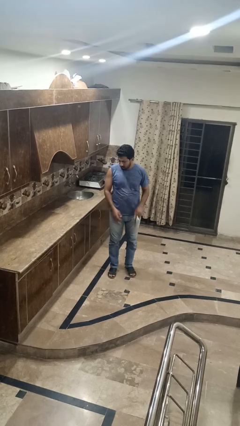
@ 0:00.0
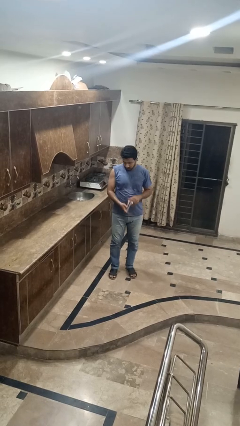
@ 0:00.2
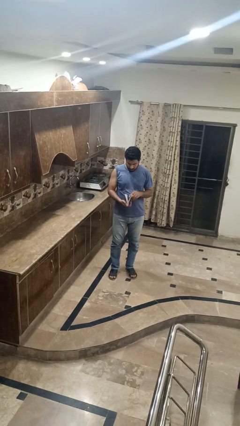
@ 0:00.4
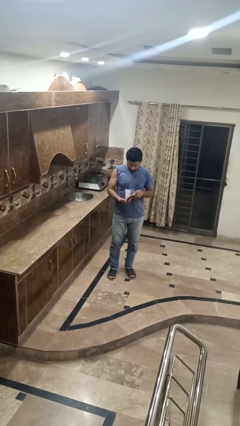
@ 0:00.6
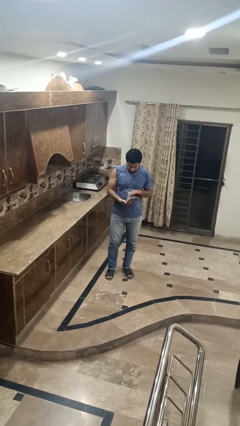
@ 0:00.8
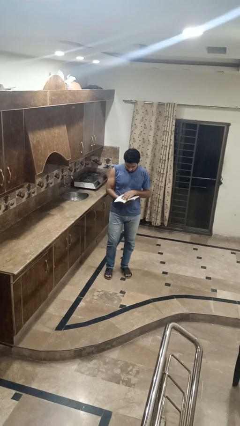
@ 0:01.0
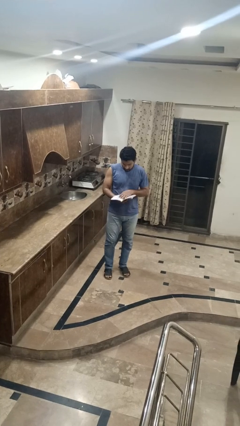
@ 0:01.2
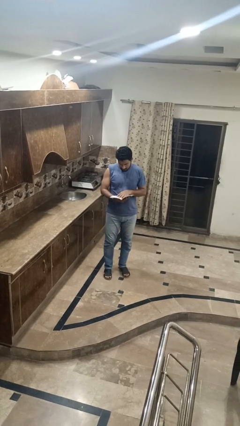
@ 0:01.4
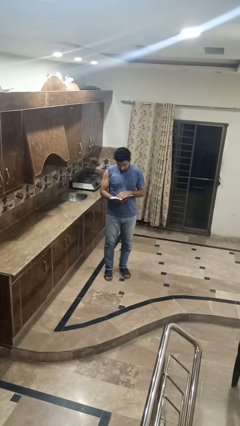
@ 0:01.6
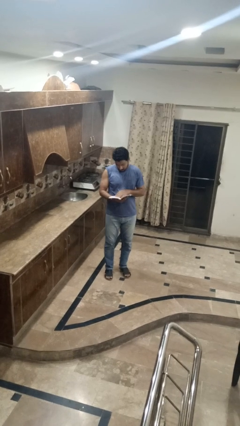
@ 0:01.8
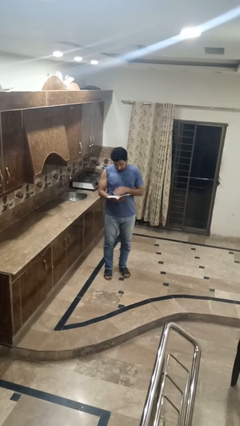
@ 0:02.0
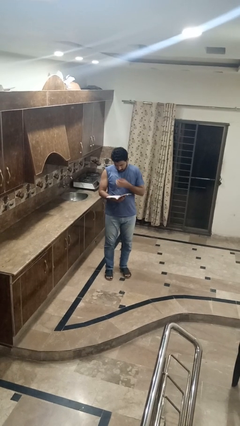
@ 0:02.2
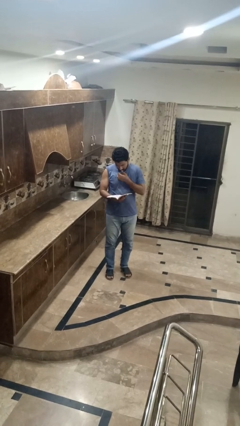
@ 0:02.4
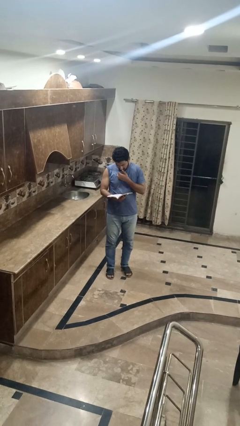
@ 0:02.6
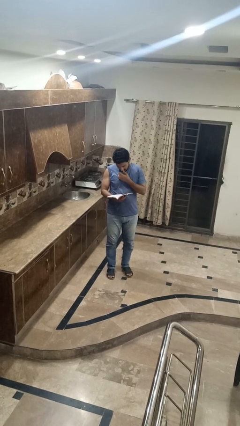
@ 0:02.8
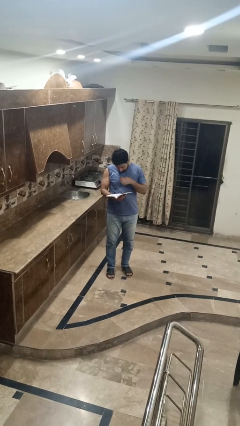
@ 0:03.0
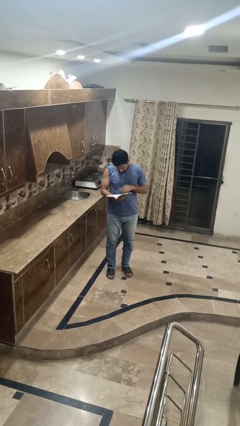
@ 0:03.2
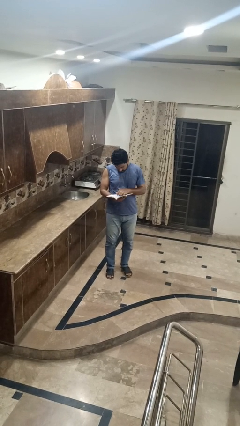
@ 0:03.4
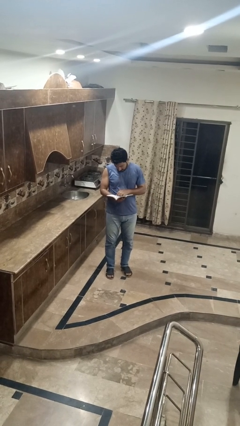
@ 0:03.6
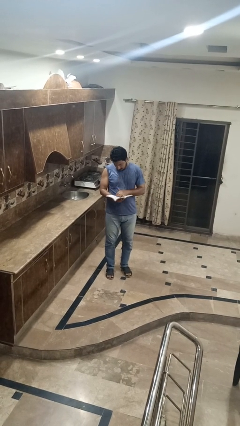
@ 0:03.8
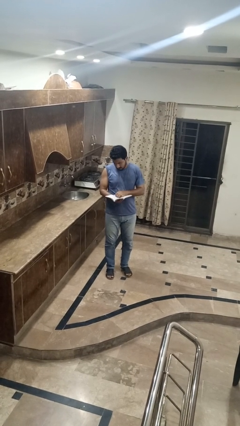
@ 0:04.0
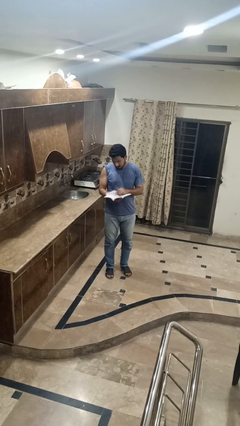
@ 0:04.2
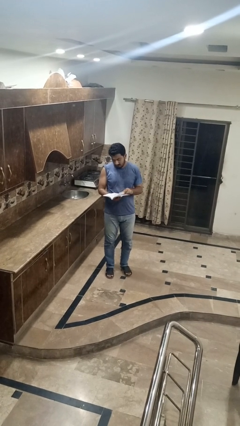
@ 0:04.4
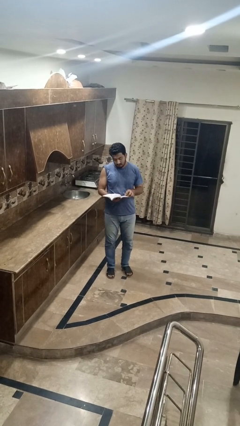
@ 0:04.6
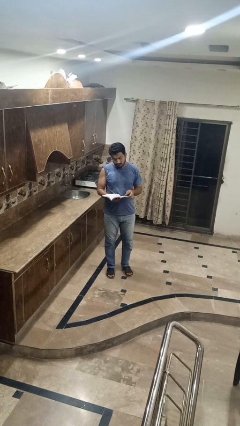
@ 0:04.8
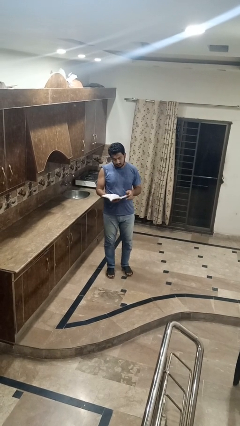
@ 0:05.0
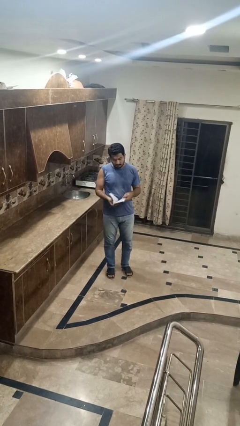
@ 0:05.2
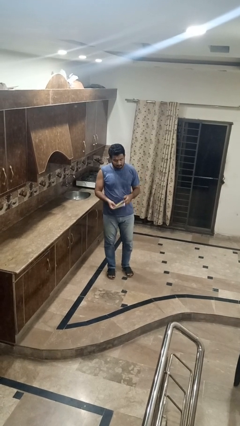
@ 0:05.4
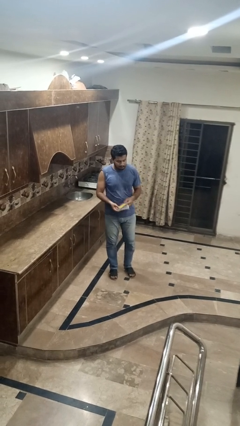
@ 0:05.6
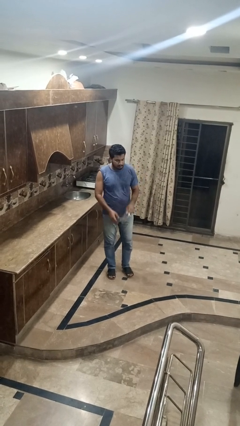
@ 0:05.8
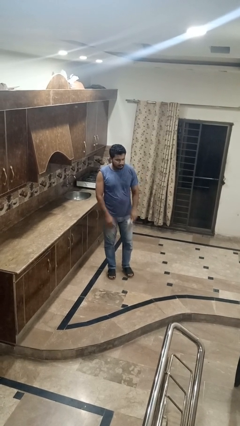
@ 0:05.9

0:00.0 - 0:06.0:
person reads book

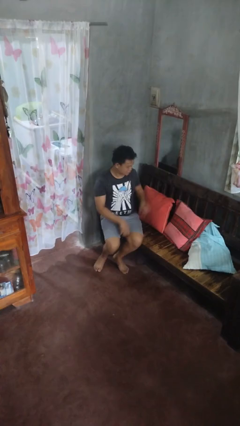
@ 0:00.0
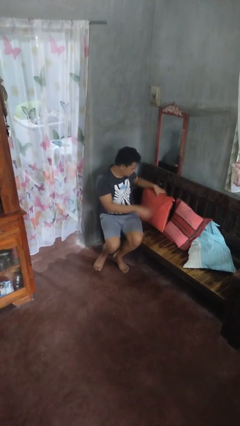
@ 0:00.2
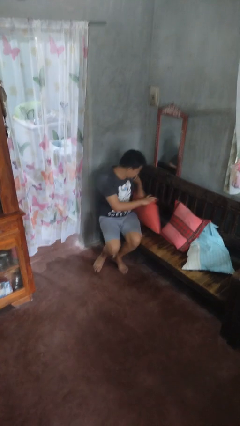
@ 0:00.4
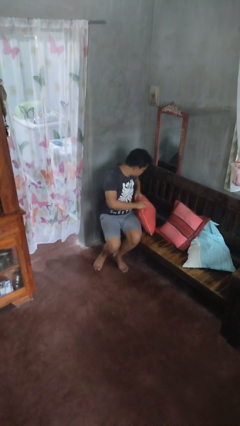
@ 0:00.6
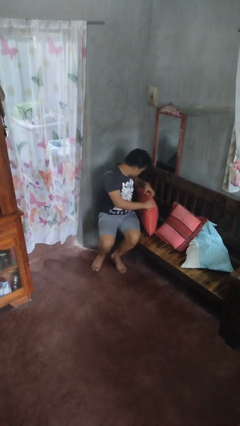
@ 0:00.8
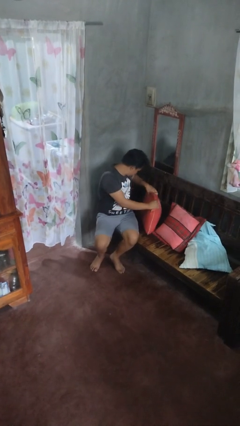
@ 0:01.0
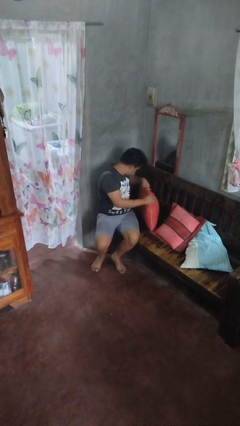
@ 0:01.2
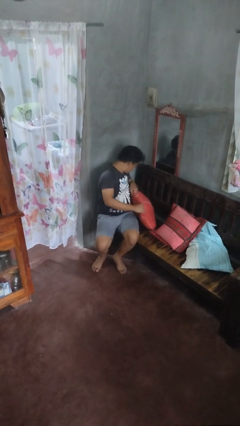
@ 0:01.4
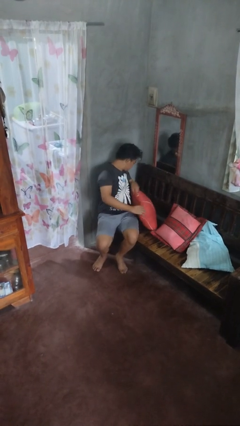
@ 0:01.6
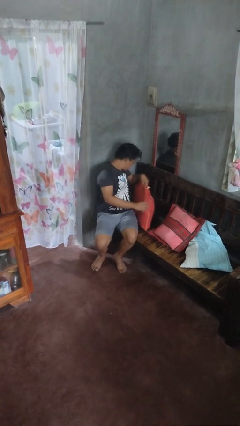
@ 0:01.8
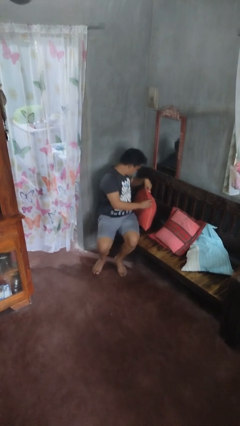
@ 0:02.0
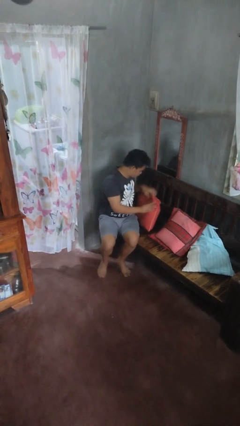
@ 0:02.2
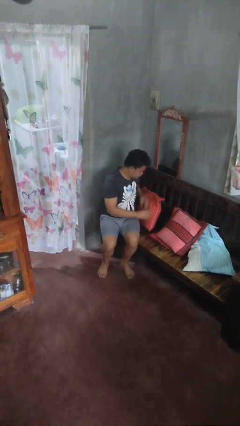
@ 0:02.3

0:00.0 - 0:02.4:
person searches in couch

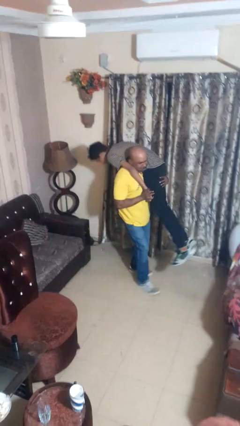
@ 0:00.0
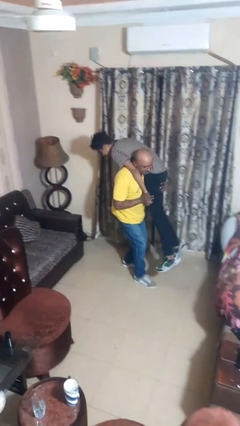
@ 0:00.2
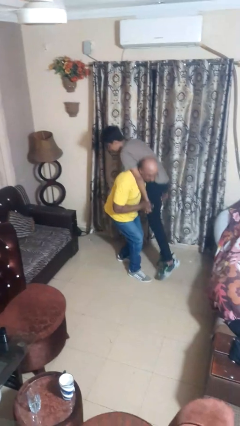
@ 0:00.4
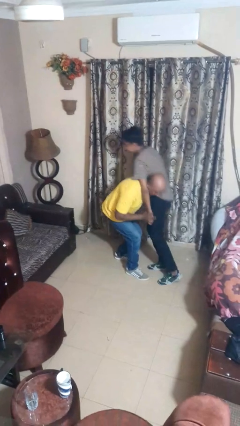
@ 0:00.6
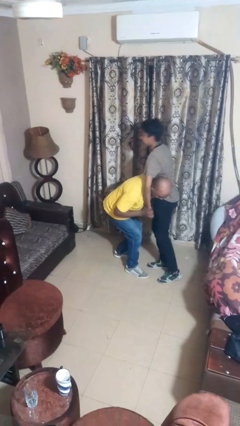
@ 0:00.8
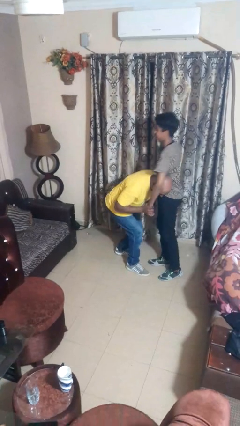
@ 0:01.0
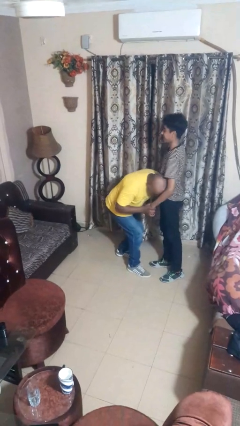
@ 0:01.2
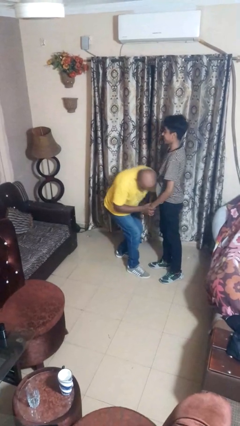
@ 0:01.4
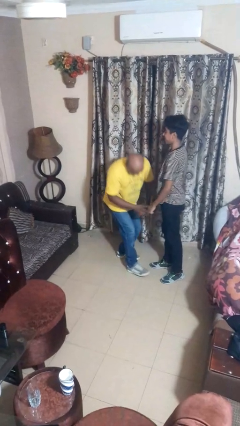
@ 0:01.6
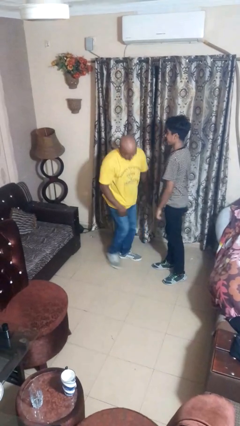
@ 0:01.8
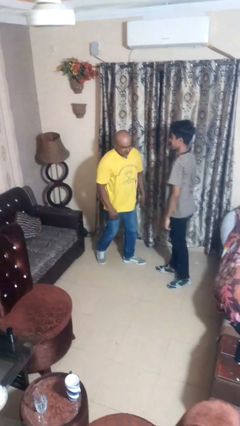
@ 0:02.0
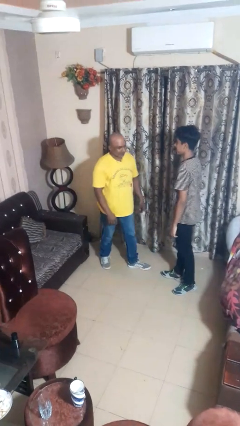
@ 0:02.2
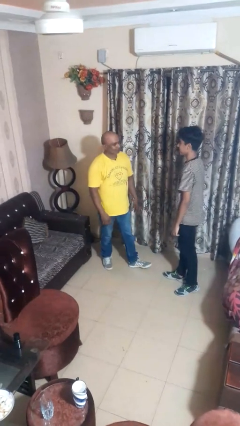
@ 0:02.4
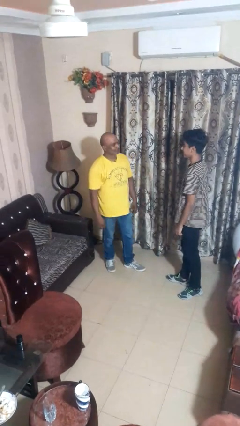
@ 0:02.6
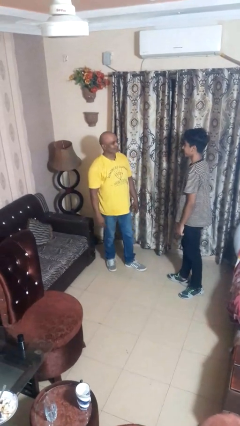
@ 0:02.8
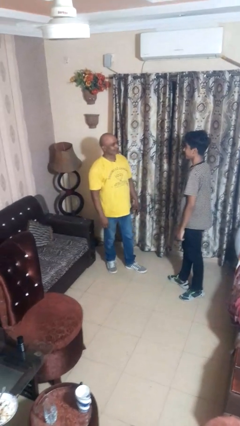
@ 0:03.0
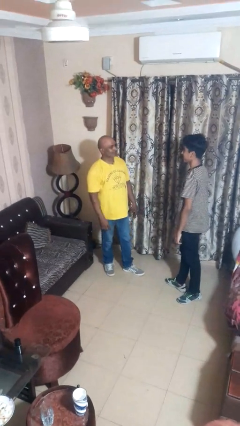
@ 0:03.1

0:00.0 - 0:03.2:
person puts down person

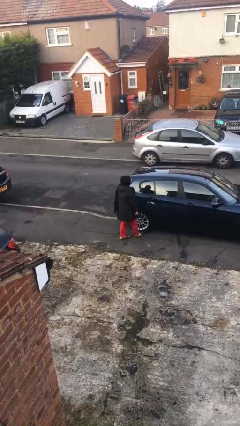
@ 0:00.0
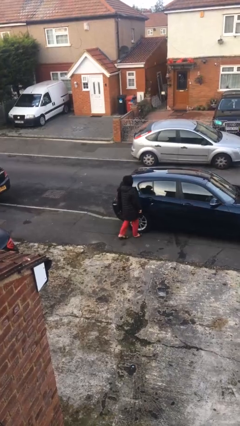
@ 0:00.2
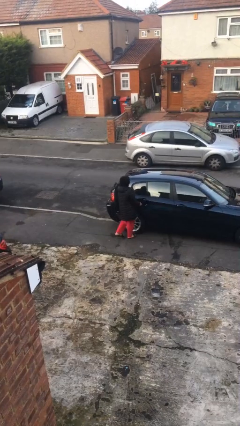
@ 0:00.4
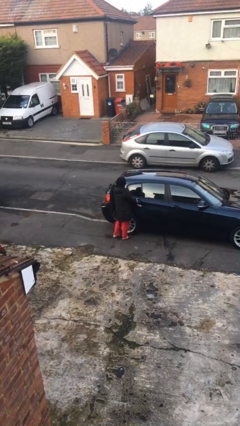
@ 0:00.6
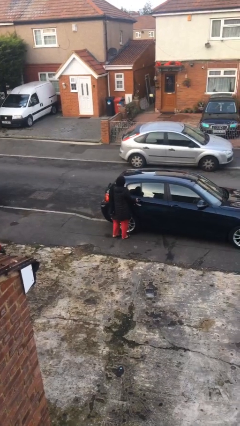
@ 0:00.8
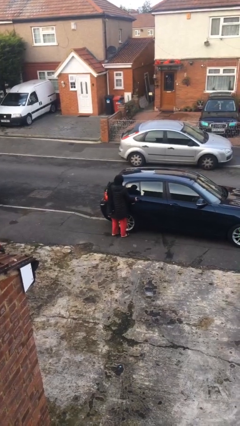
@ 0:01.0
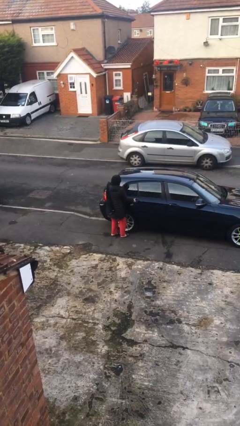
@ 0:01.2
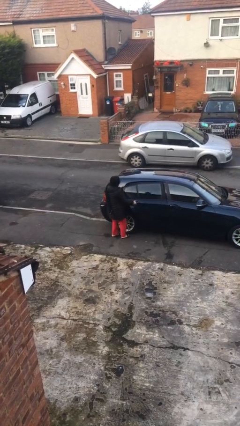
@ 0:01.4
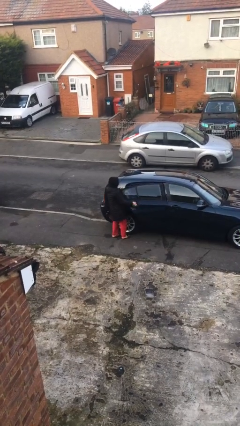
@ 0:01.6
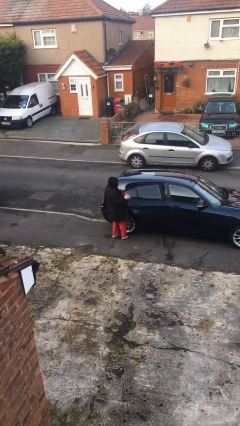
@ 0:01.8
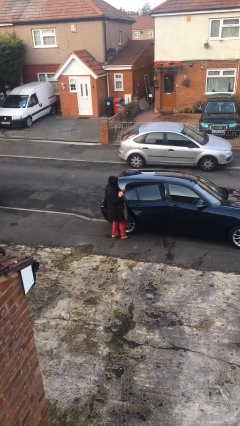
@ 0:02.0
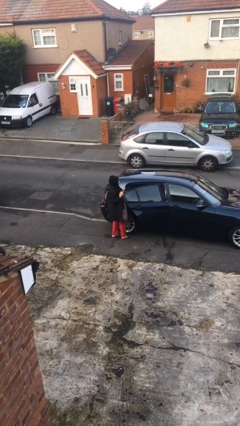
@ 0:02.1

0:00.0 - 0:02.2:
person opens car door

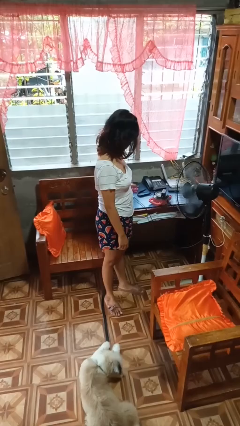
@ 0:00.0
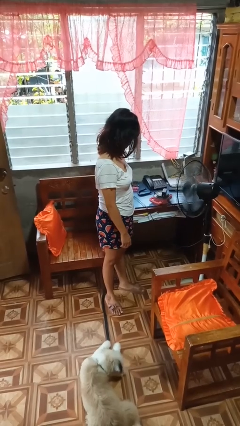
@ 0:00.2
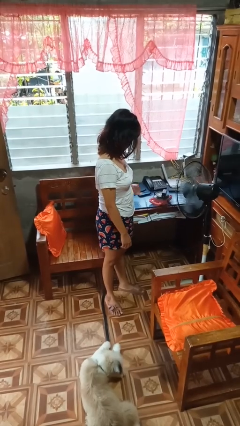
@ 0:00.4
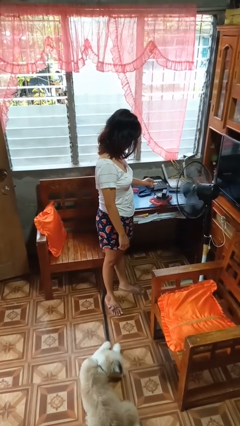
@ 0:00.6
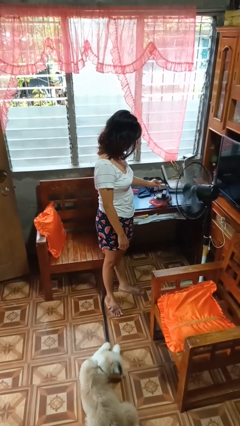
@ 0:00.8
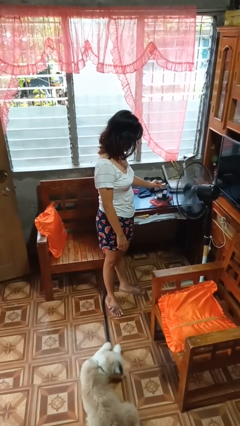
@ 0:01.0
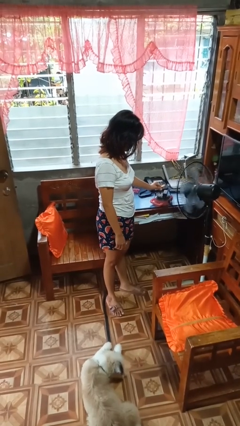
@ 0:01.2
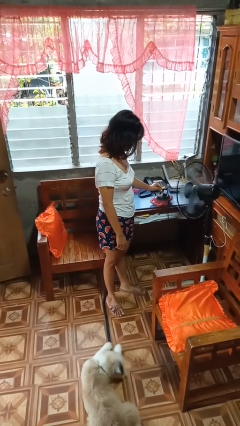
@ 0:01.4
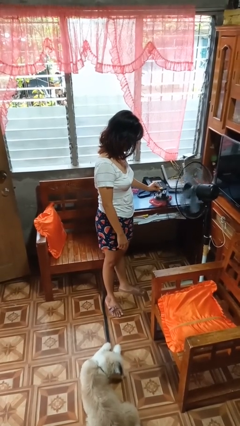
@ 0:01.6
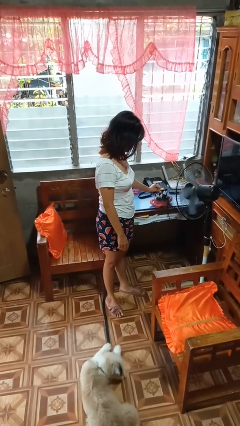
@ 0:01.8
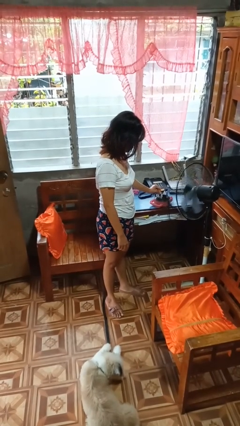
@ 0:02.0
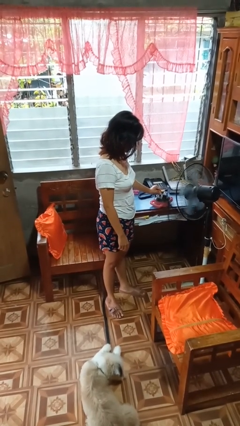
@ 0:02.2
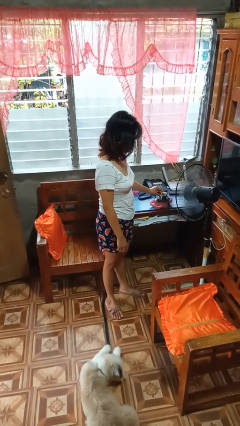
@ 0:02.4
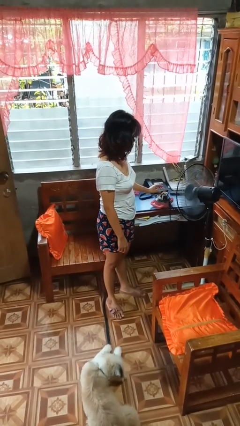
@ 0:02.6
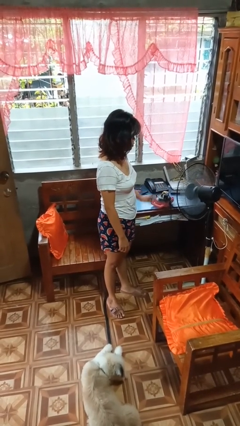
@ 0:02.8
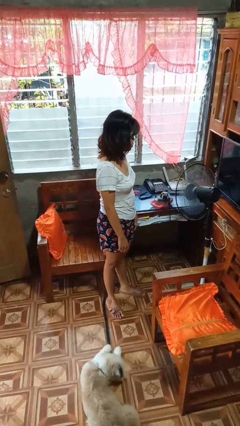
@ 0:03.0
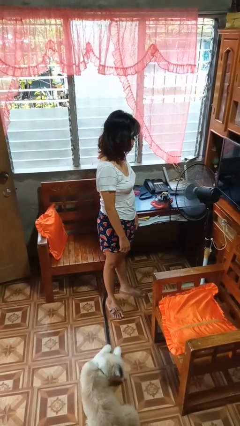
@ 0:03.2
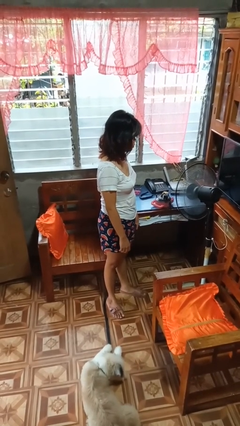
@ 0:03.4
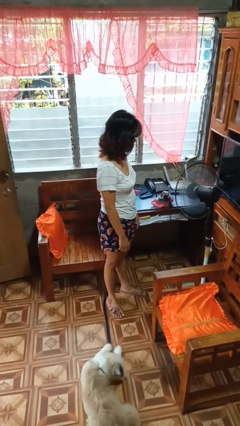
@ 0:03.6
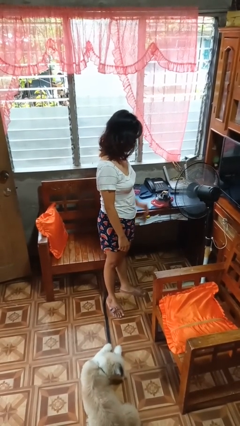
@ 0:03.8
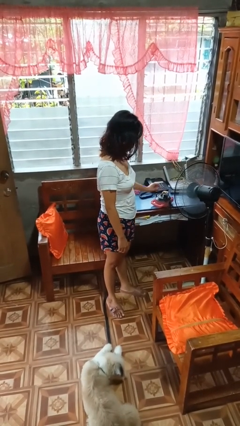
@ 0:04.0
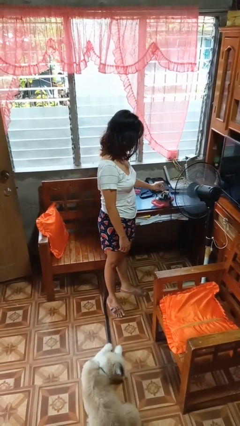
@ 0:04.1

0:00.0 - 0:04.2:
person plugs into electrical socket
